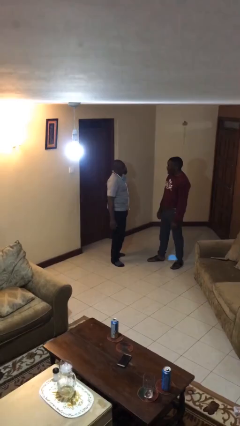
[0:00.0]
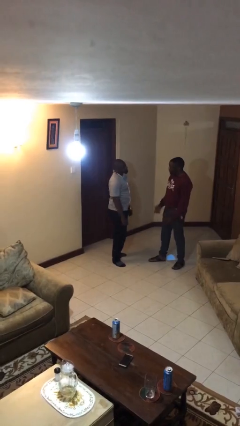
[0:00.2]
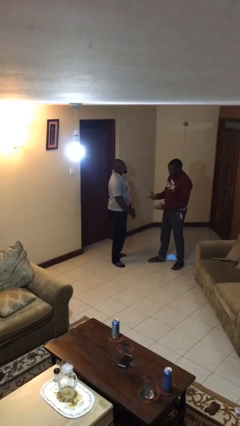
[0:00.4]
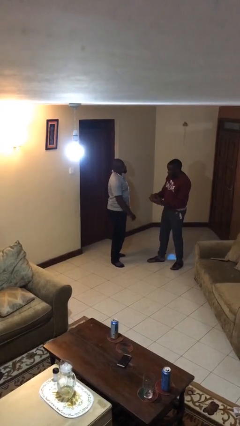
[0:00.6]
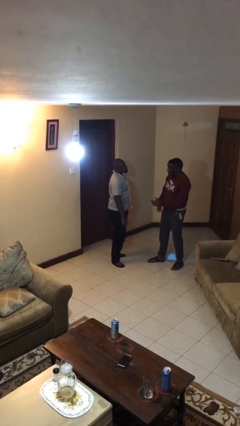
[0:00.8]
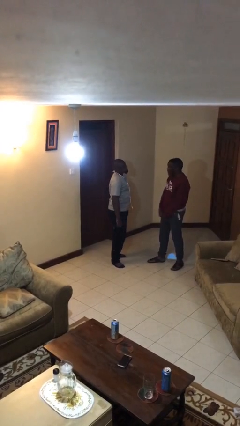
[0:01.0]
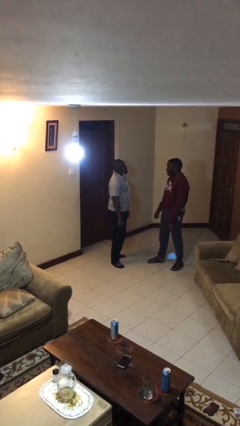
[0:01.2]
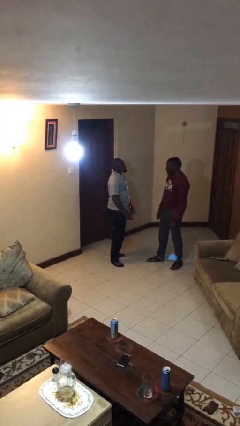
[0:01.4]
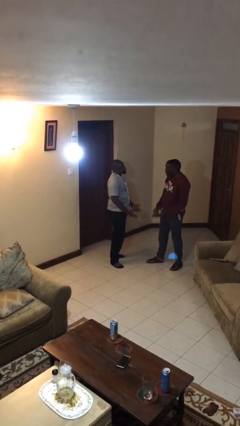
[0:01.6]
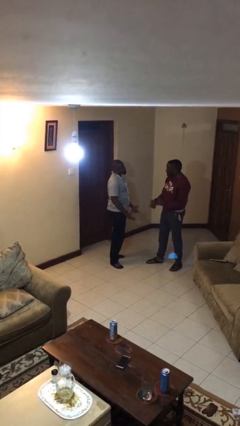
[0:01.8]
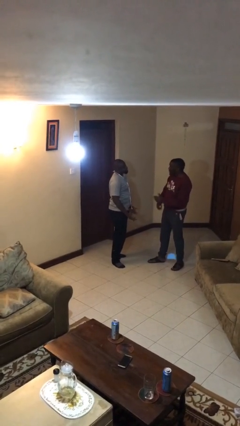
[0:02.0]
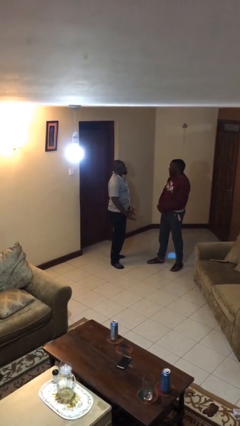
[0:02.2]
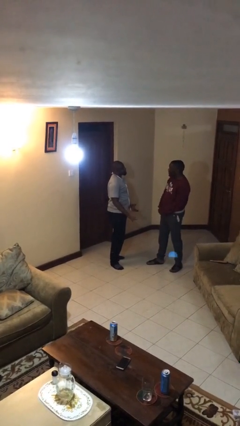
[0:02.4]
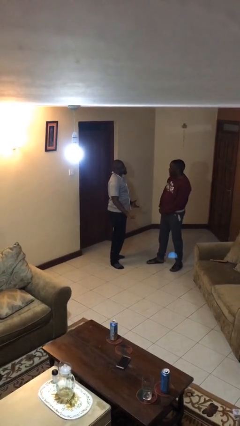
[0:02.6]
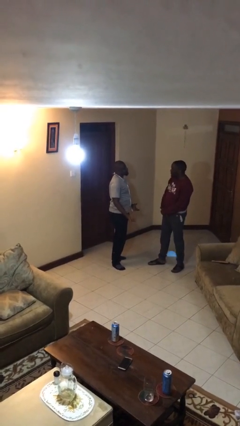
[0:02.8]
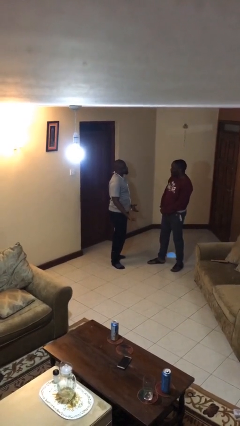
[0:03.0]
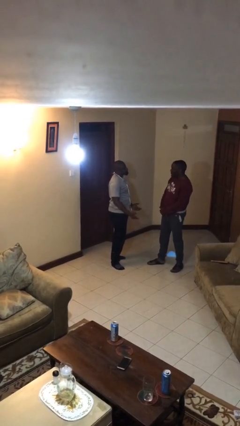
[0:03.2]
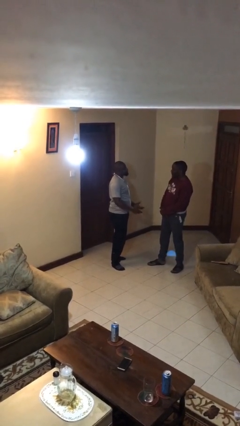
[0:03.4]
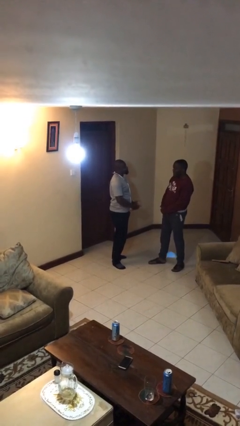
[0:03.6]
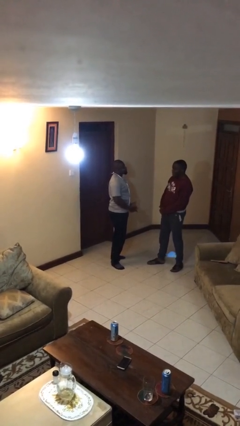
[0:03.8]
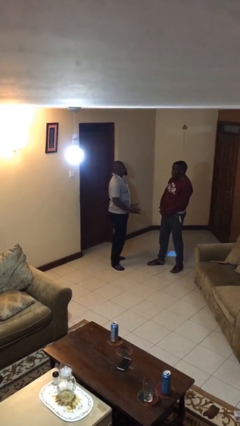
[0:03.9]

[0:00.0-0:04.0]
person talks to person

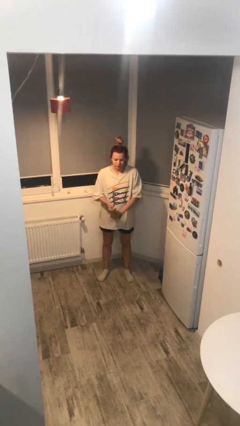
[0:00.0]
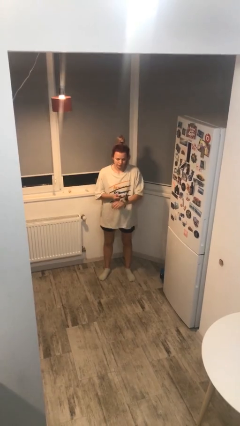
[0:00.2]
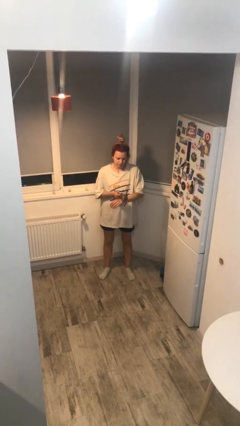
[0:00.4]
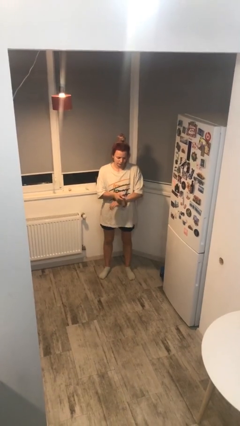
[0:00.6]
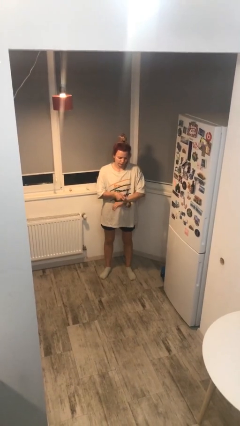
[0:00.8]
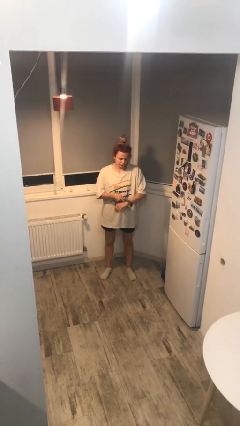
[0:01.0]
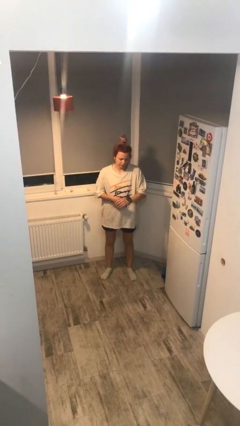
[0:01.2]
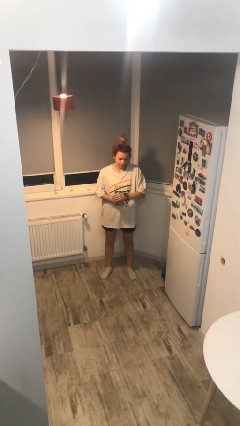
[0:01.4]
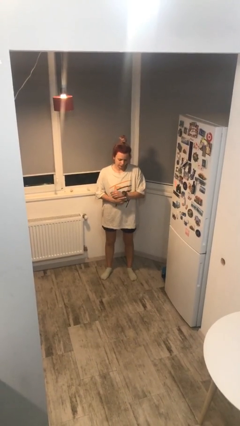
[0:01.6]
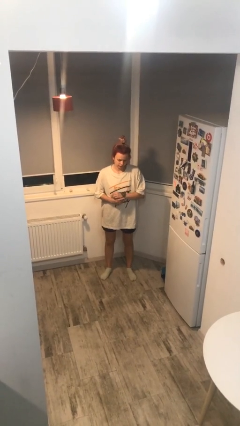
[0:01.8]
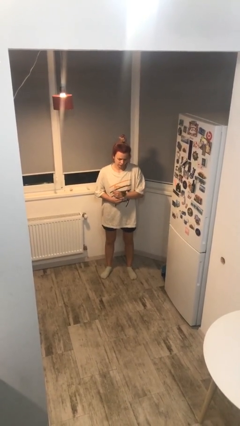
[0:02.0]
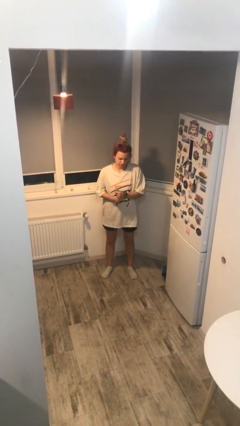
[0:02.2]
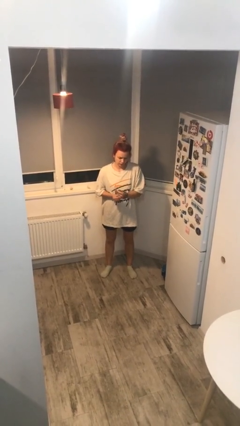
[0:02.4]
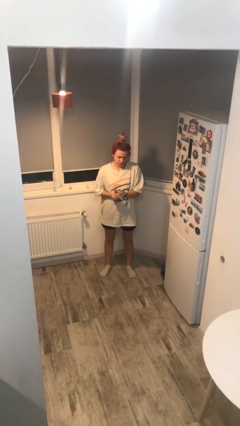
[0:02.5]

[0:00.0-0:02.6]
person puts on wristwatch

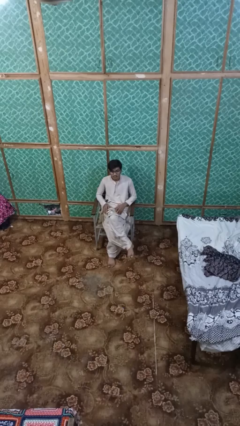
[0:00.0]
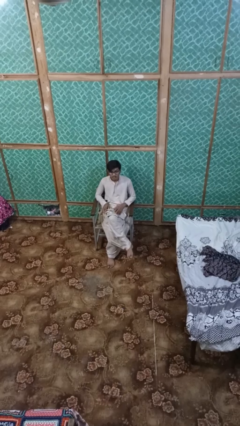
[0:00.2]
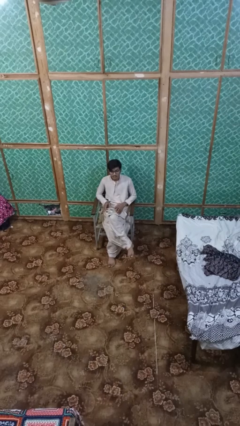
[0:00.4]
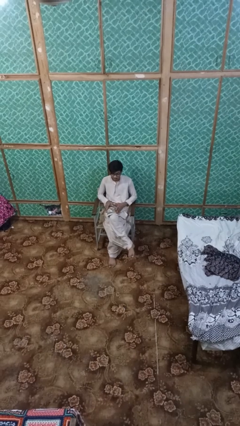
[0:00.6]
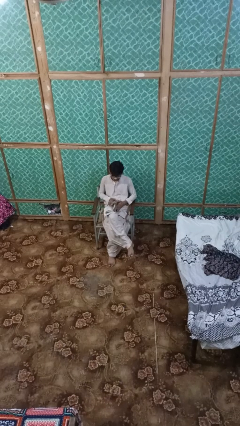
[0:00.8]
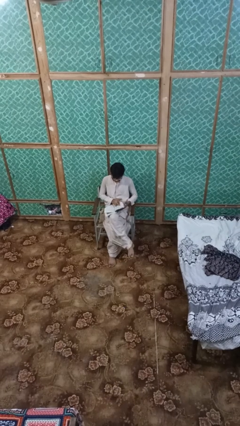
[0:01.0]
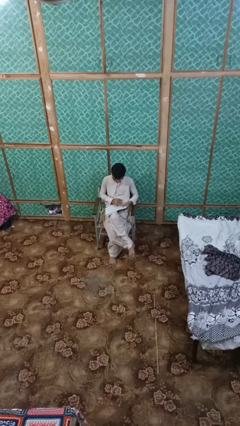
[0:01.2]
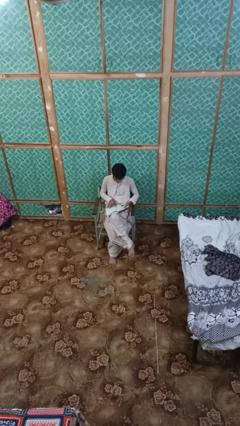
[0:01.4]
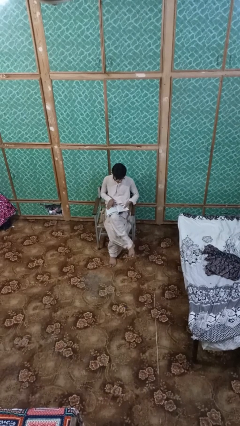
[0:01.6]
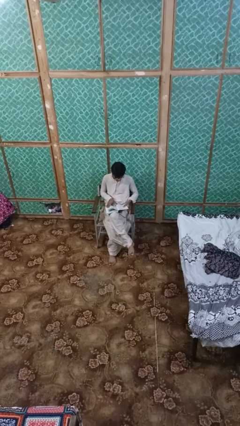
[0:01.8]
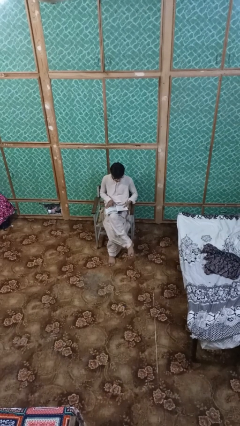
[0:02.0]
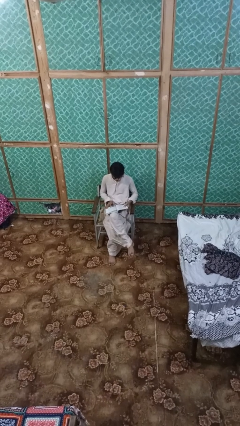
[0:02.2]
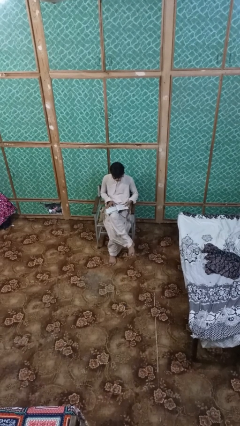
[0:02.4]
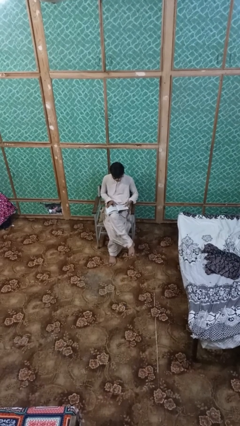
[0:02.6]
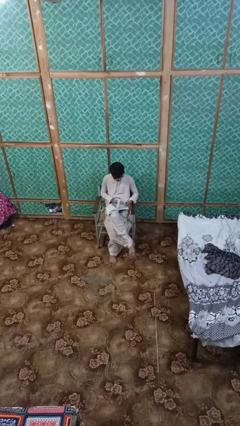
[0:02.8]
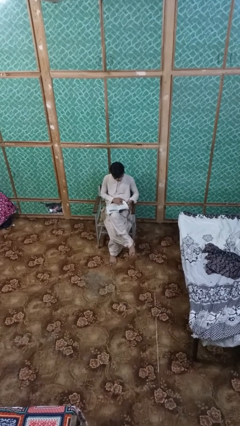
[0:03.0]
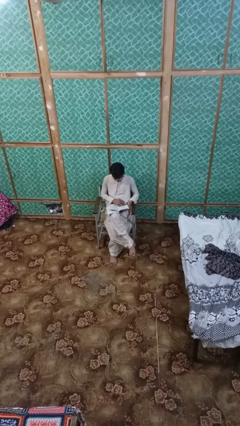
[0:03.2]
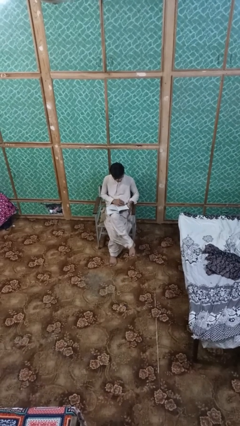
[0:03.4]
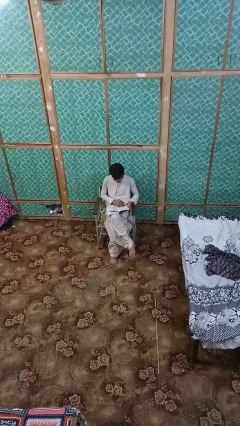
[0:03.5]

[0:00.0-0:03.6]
person reads book

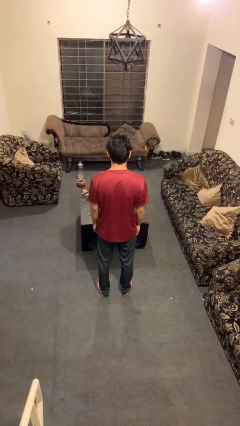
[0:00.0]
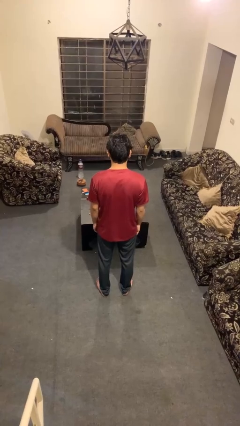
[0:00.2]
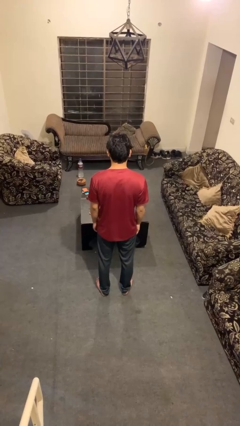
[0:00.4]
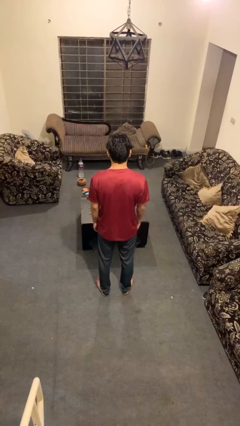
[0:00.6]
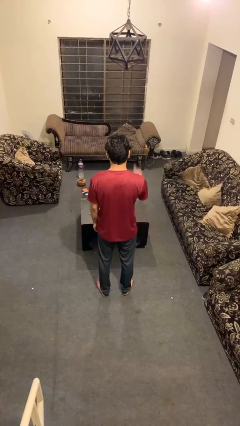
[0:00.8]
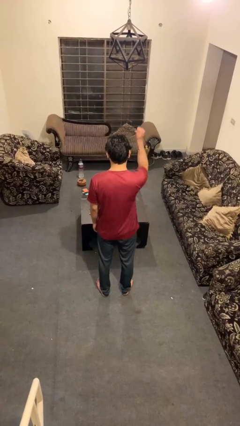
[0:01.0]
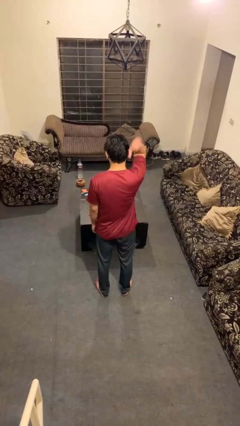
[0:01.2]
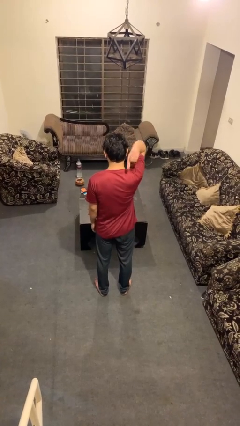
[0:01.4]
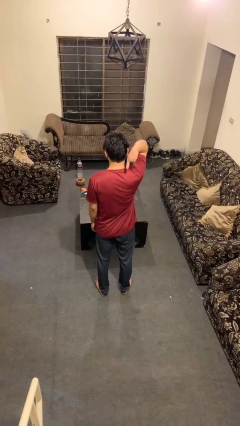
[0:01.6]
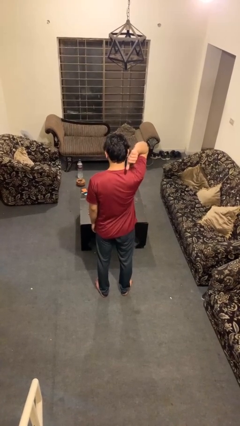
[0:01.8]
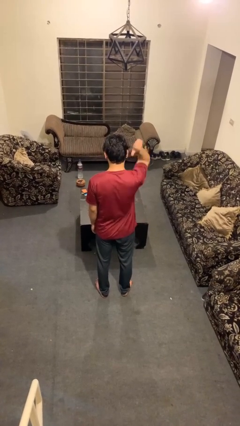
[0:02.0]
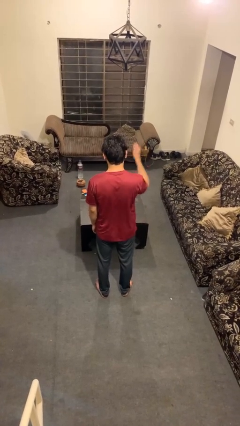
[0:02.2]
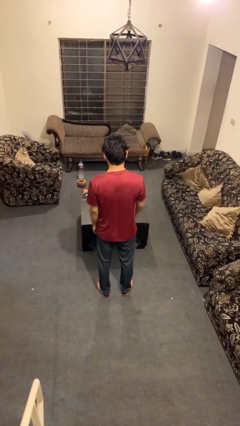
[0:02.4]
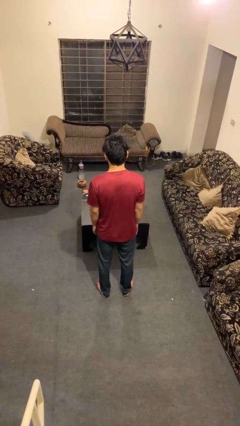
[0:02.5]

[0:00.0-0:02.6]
person gestures behind me

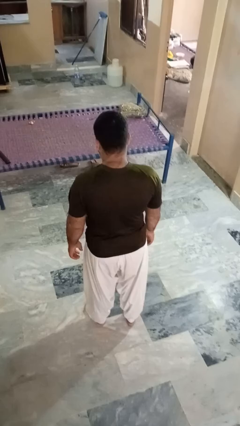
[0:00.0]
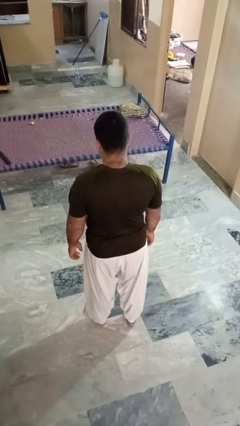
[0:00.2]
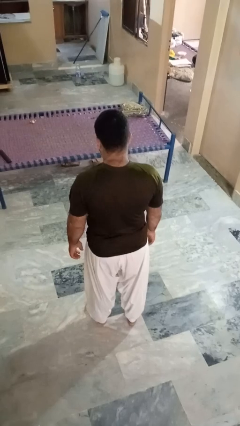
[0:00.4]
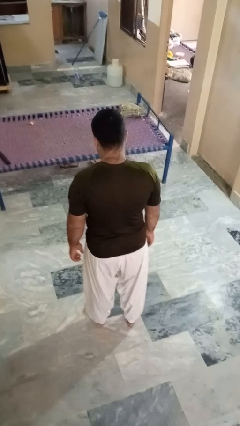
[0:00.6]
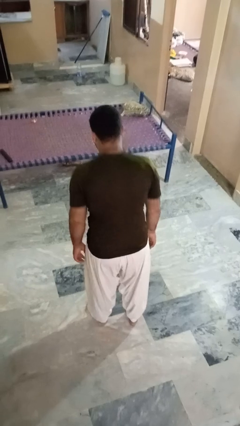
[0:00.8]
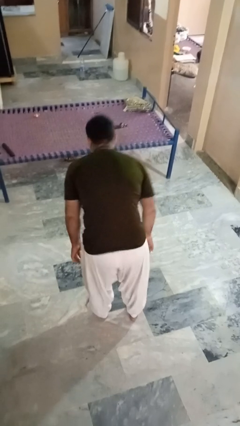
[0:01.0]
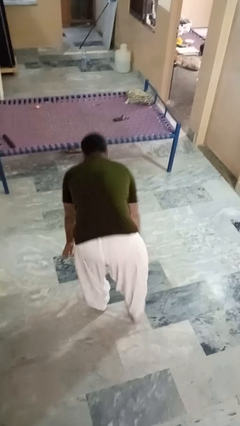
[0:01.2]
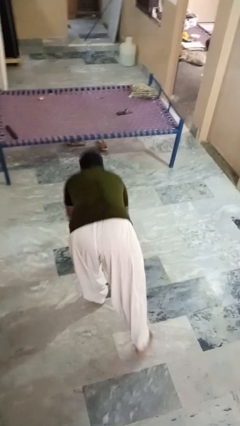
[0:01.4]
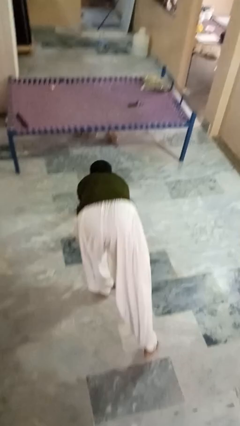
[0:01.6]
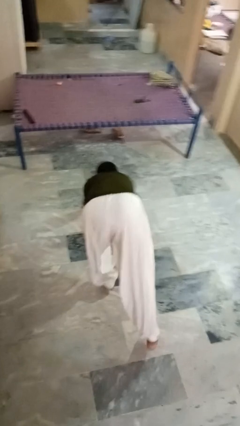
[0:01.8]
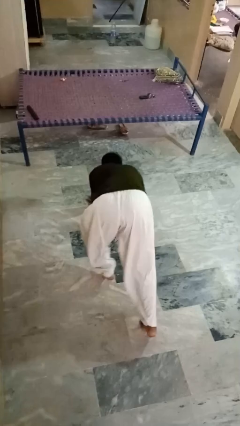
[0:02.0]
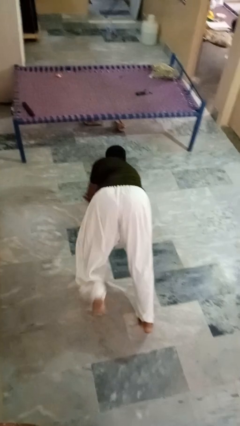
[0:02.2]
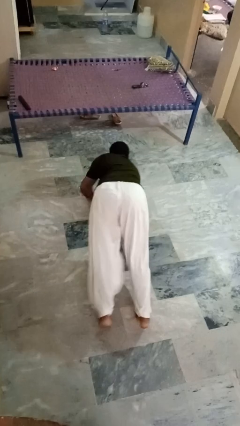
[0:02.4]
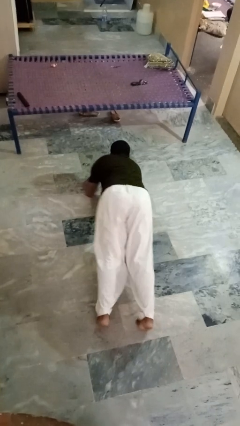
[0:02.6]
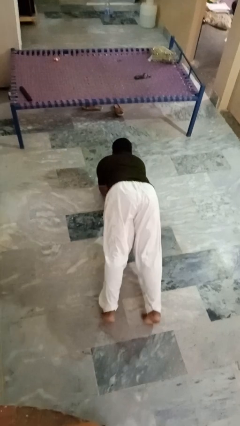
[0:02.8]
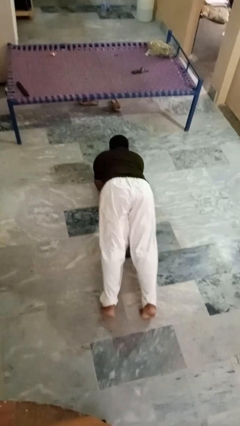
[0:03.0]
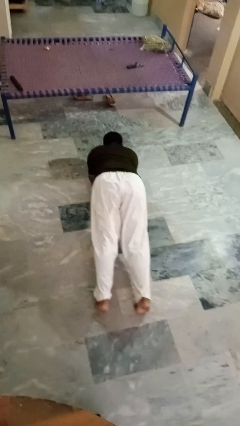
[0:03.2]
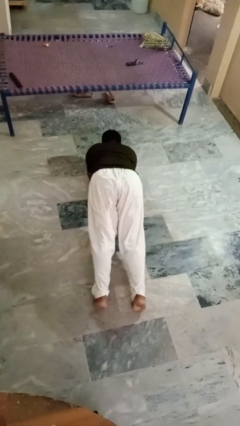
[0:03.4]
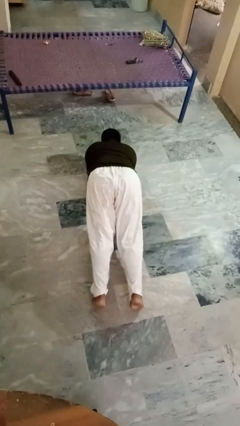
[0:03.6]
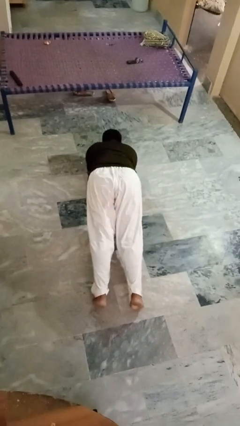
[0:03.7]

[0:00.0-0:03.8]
person exercises with plank

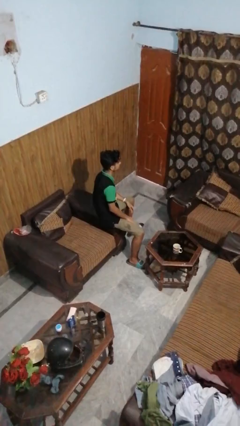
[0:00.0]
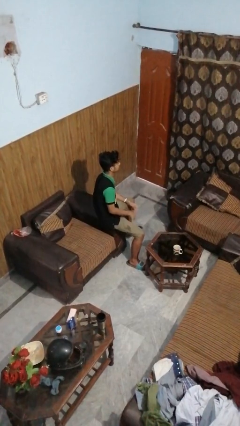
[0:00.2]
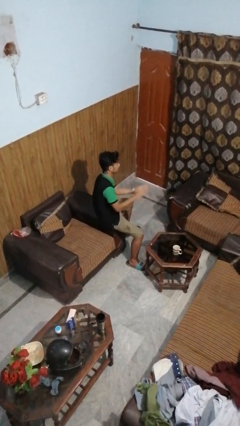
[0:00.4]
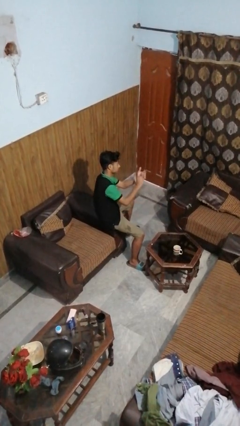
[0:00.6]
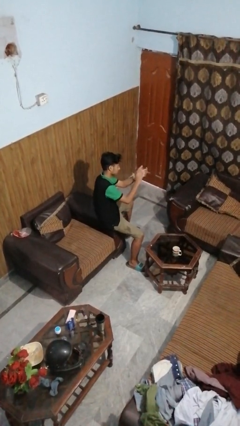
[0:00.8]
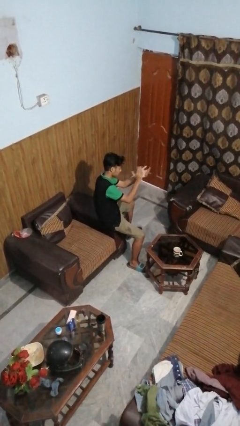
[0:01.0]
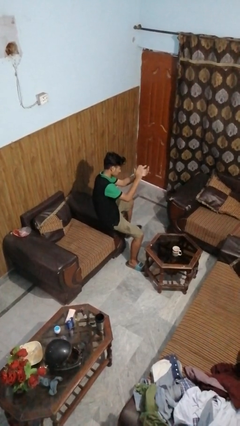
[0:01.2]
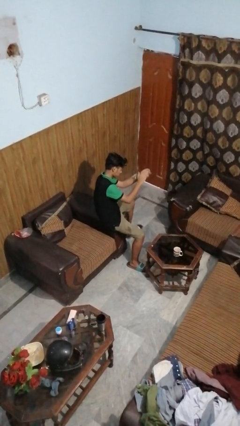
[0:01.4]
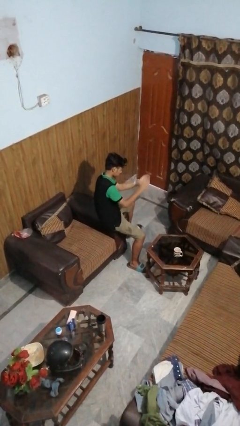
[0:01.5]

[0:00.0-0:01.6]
person claps hands
